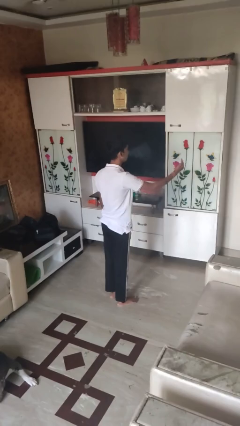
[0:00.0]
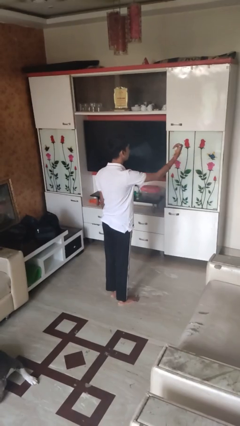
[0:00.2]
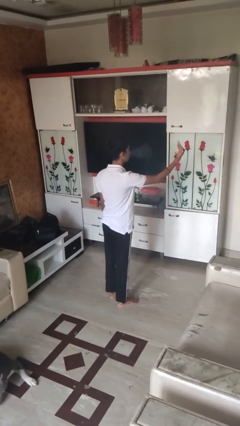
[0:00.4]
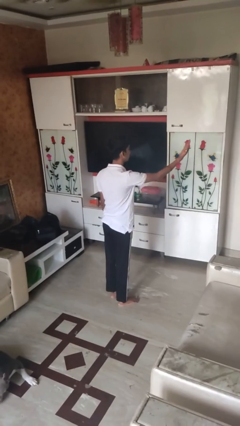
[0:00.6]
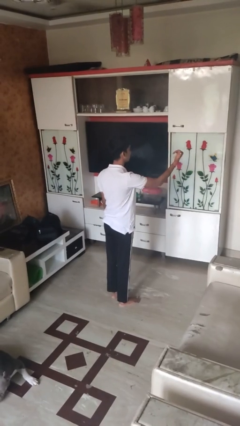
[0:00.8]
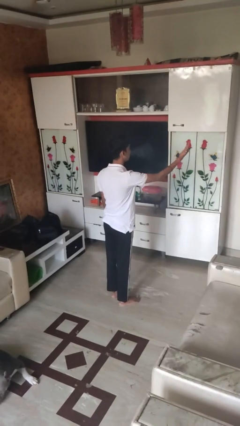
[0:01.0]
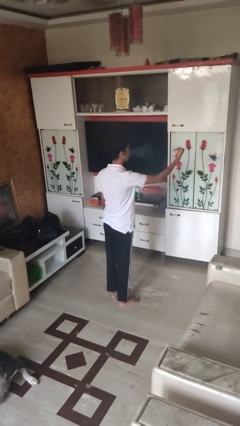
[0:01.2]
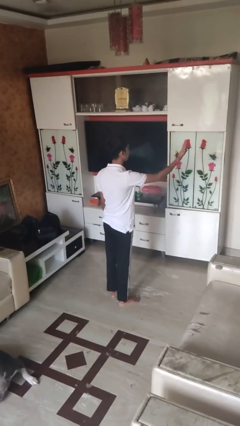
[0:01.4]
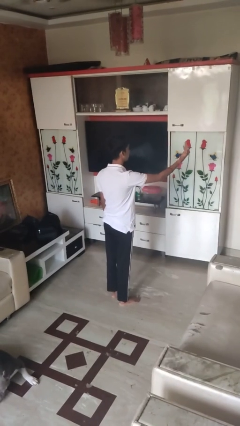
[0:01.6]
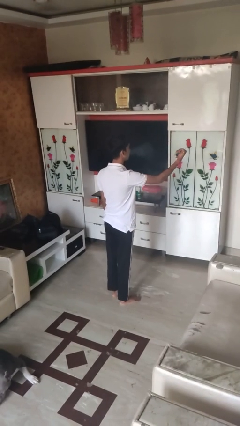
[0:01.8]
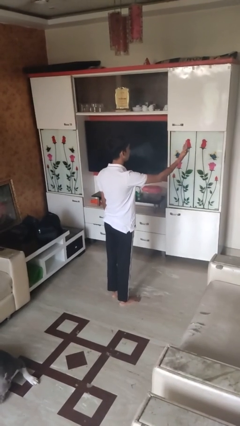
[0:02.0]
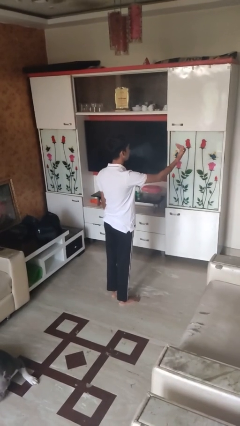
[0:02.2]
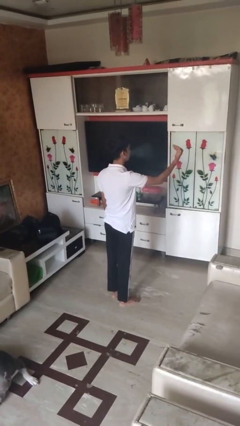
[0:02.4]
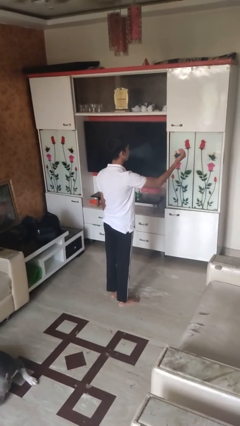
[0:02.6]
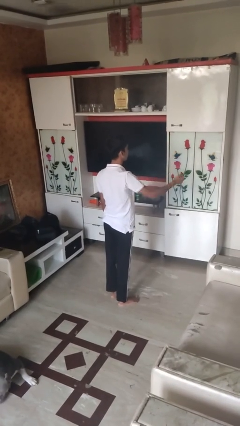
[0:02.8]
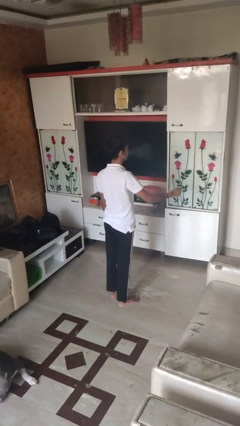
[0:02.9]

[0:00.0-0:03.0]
person gestures come here

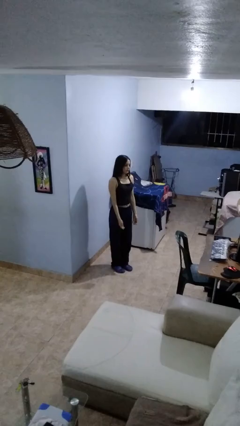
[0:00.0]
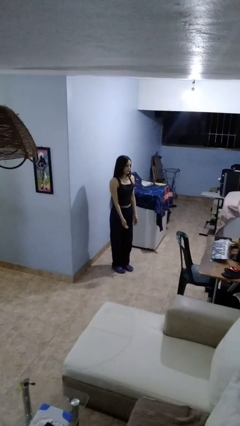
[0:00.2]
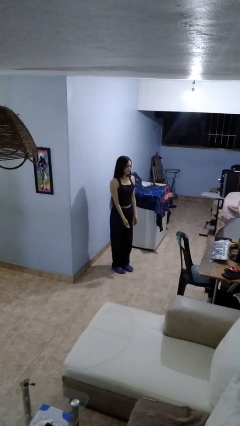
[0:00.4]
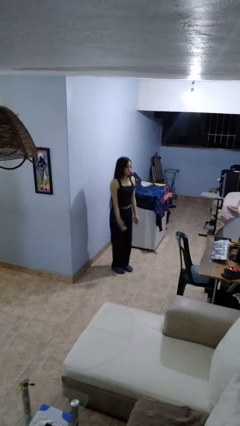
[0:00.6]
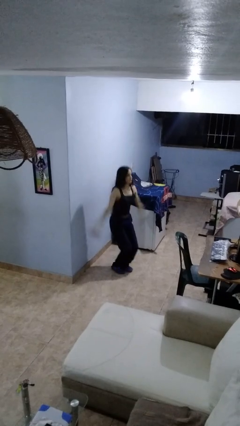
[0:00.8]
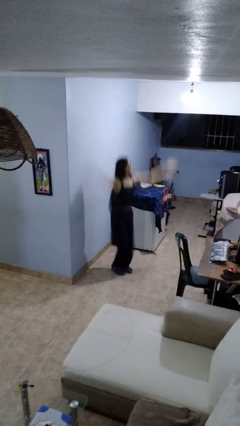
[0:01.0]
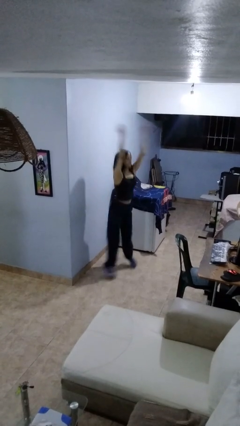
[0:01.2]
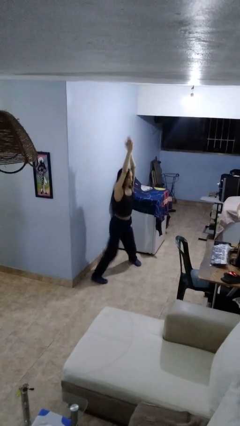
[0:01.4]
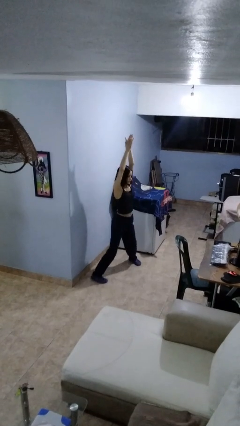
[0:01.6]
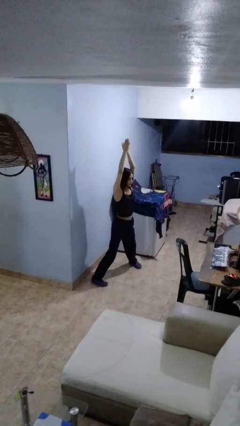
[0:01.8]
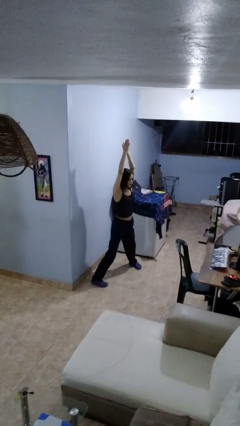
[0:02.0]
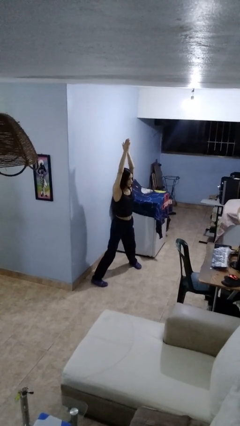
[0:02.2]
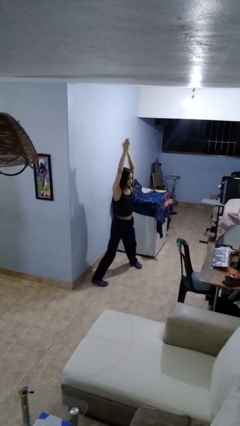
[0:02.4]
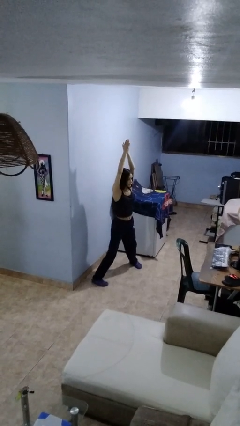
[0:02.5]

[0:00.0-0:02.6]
person exercises with jumping jacks

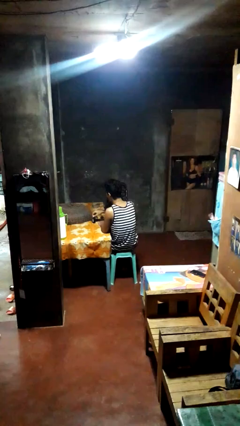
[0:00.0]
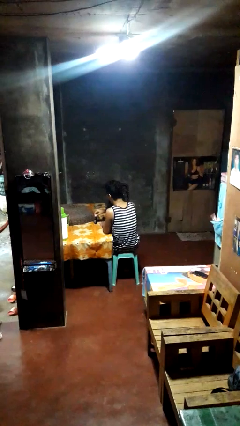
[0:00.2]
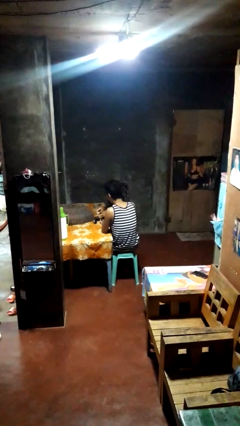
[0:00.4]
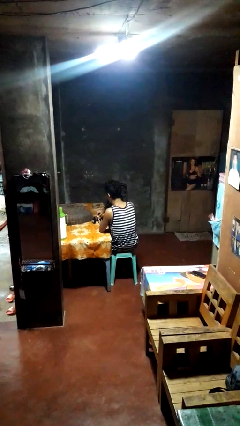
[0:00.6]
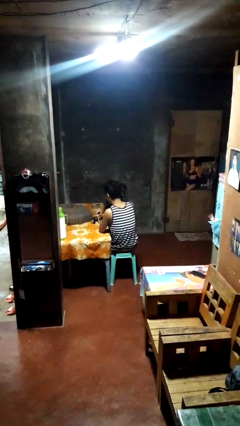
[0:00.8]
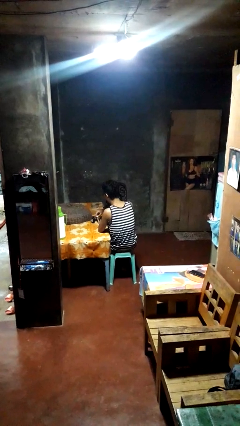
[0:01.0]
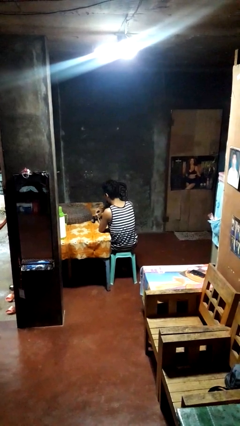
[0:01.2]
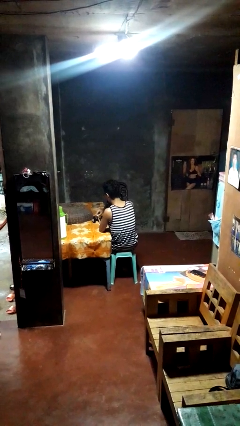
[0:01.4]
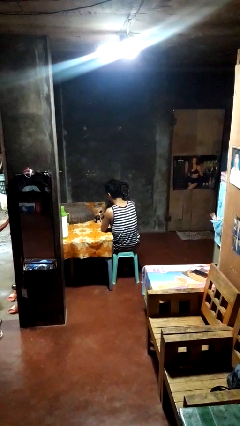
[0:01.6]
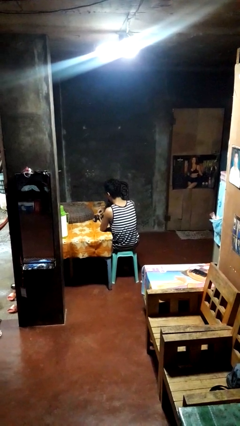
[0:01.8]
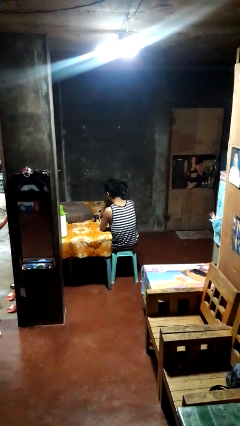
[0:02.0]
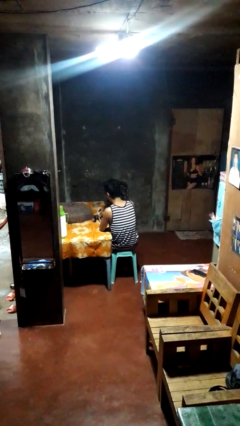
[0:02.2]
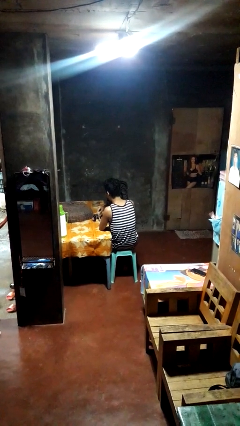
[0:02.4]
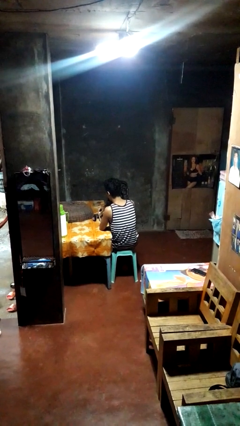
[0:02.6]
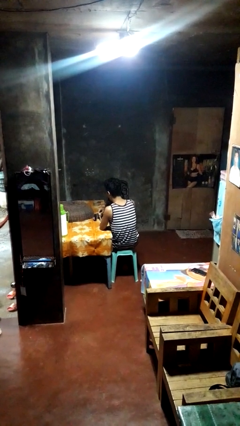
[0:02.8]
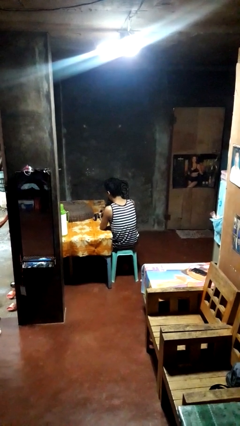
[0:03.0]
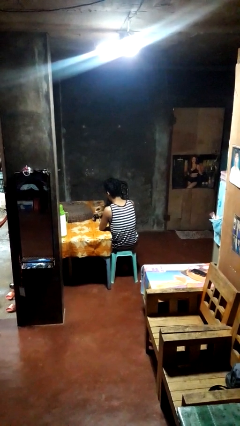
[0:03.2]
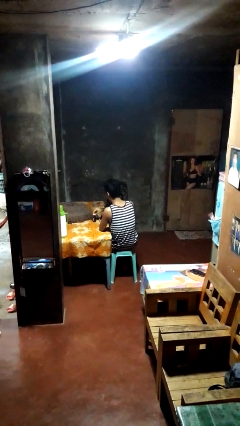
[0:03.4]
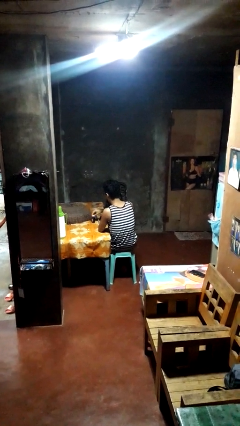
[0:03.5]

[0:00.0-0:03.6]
person paints fingernails

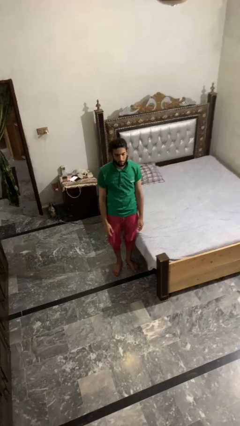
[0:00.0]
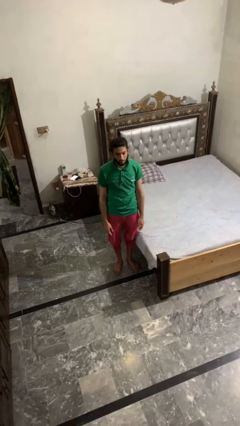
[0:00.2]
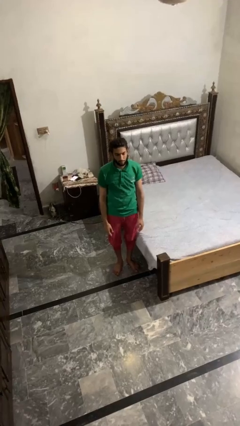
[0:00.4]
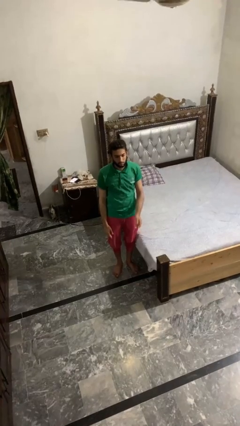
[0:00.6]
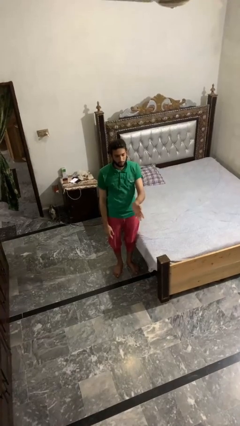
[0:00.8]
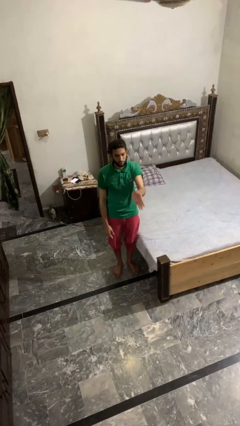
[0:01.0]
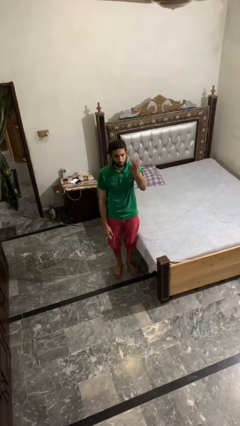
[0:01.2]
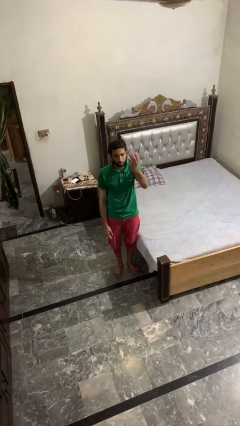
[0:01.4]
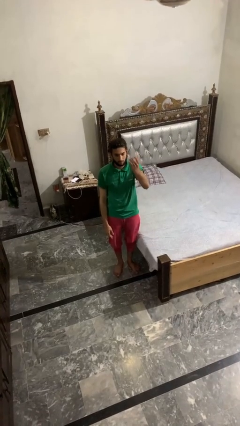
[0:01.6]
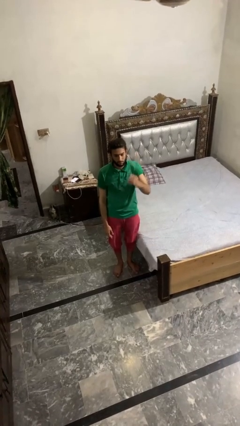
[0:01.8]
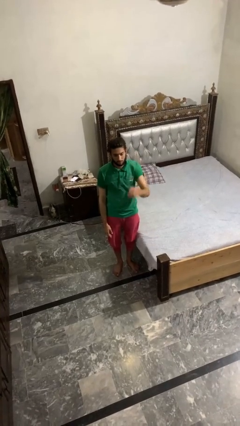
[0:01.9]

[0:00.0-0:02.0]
person gestures swipe up

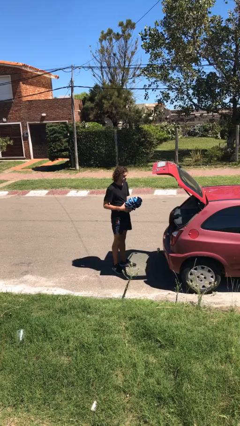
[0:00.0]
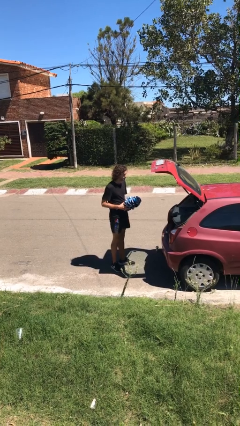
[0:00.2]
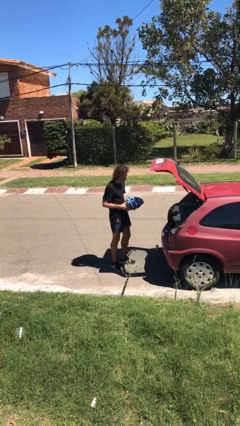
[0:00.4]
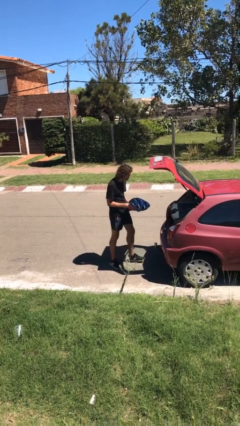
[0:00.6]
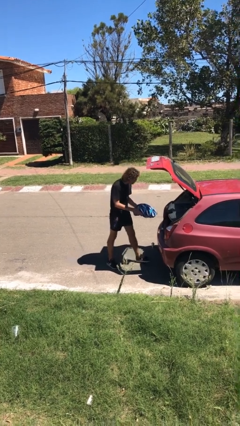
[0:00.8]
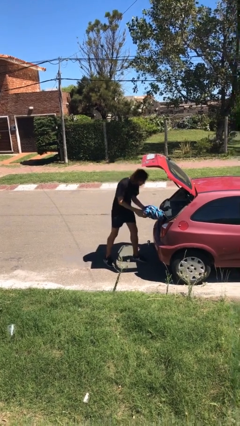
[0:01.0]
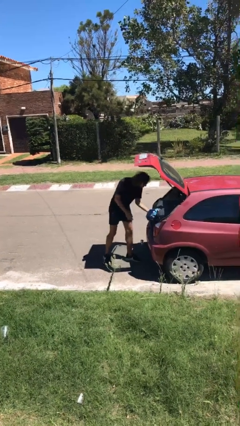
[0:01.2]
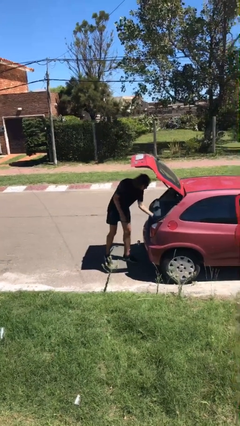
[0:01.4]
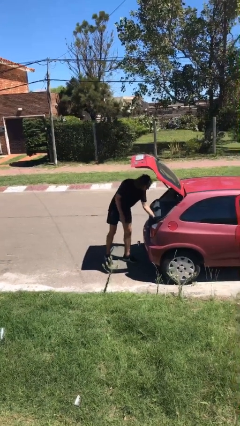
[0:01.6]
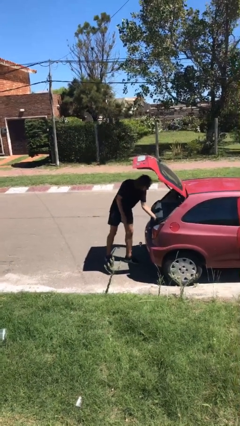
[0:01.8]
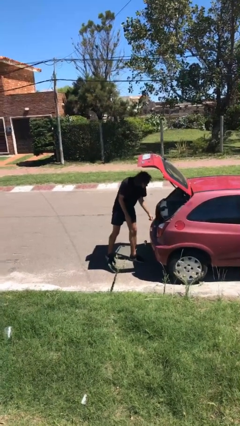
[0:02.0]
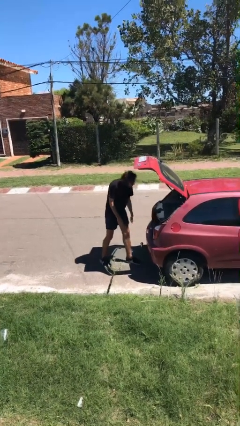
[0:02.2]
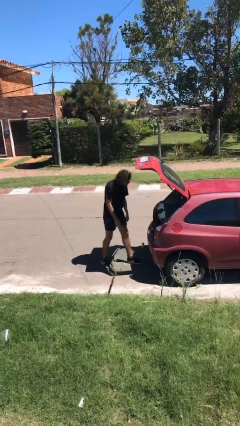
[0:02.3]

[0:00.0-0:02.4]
person loads car

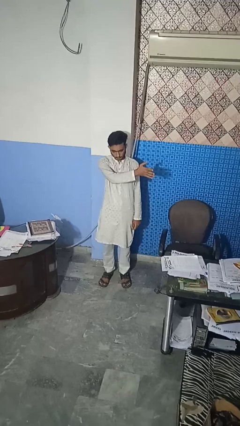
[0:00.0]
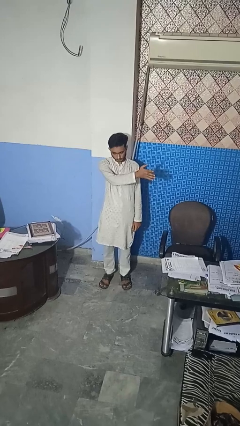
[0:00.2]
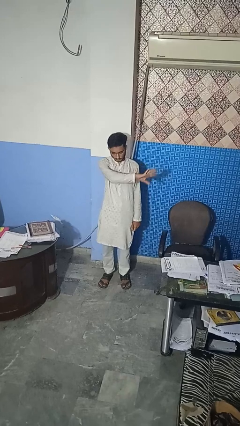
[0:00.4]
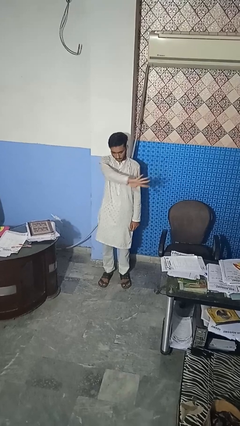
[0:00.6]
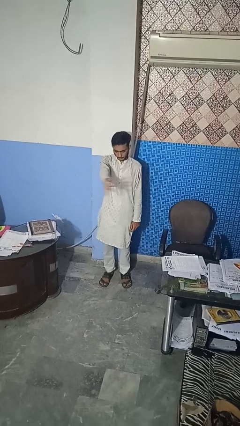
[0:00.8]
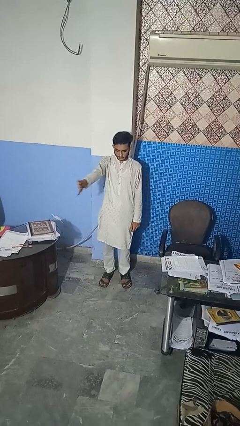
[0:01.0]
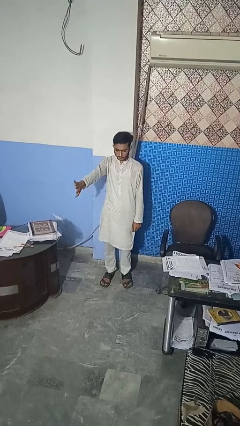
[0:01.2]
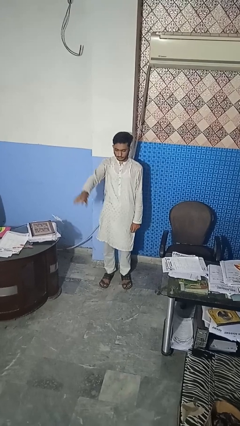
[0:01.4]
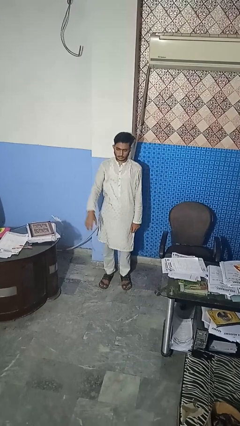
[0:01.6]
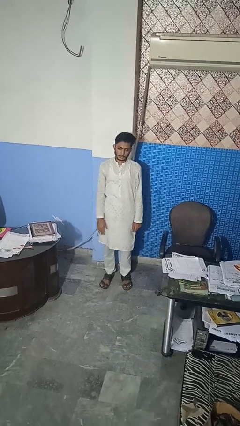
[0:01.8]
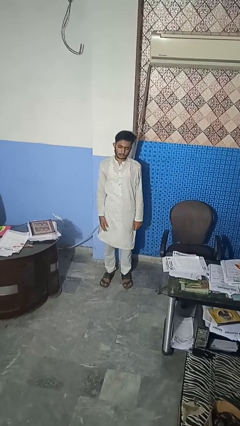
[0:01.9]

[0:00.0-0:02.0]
person gestures swipe right

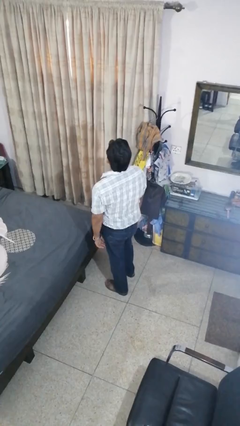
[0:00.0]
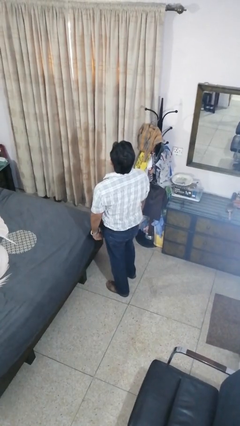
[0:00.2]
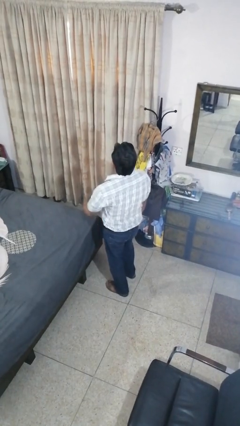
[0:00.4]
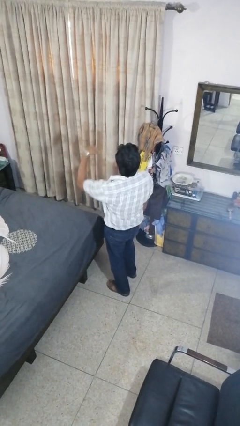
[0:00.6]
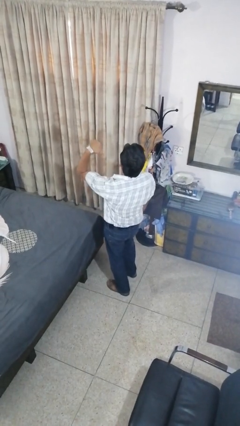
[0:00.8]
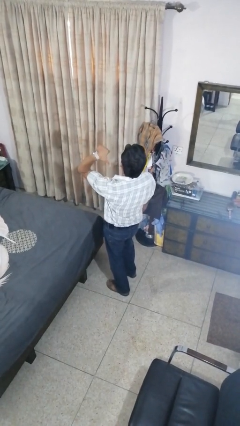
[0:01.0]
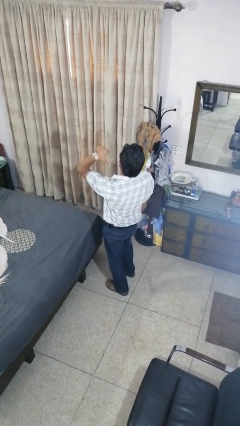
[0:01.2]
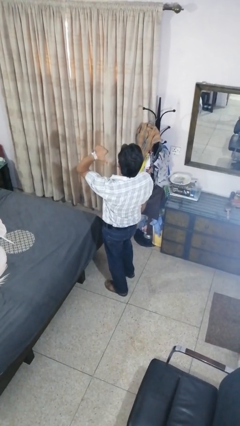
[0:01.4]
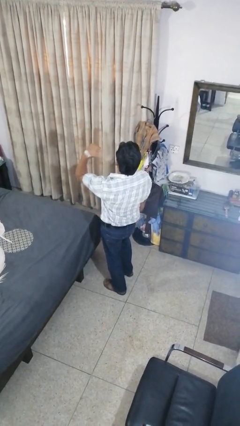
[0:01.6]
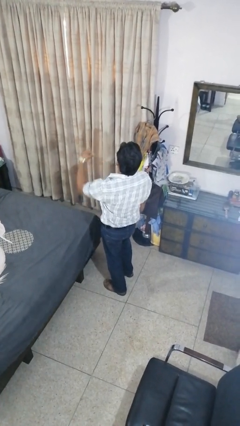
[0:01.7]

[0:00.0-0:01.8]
person gestures behind me
